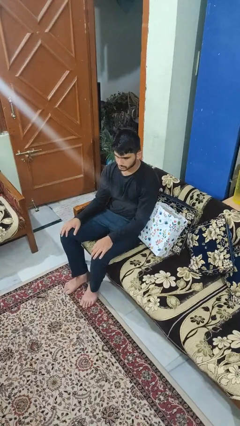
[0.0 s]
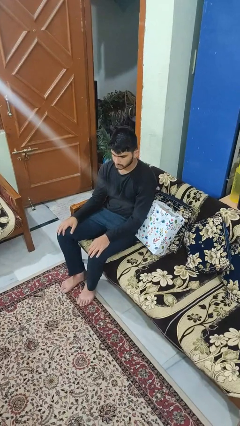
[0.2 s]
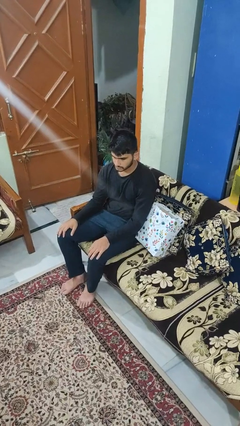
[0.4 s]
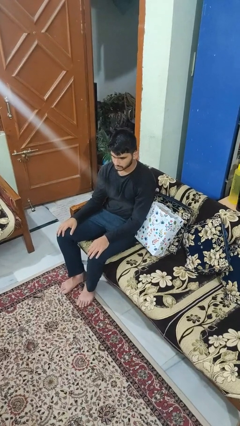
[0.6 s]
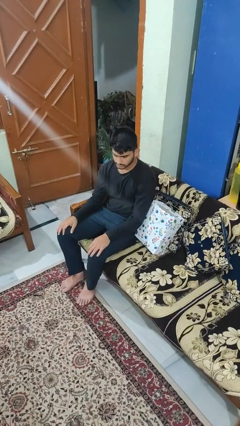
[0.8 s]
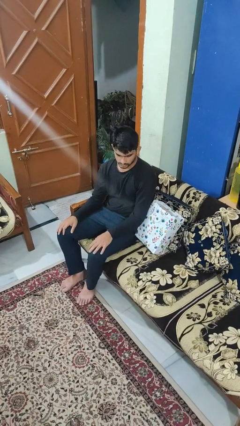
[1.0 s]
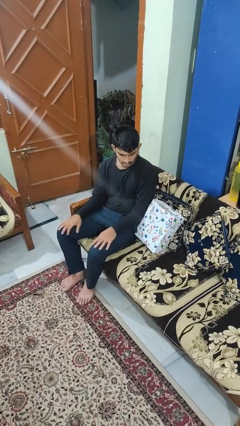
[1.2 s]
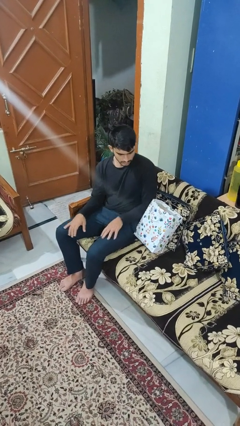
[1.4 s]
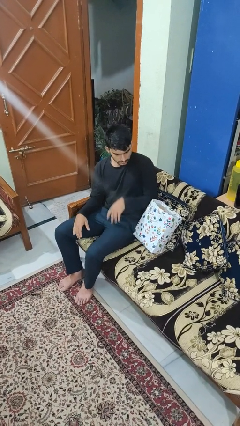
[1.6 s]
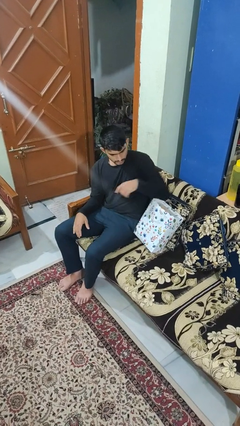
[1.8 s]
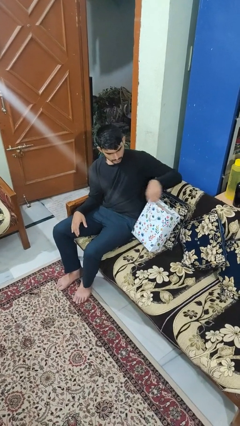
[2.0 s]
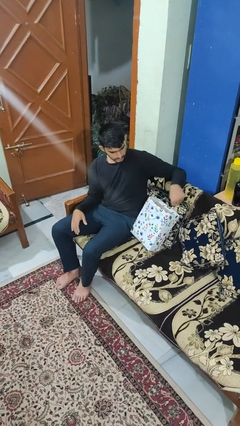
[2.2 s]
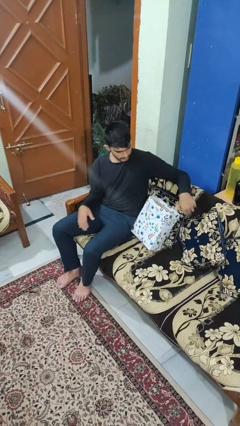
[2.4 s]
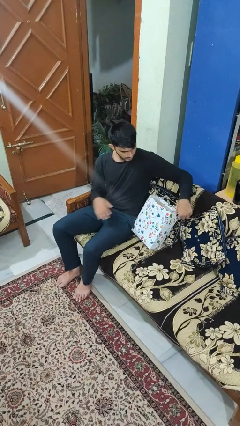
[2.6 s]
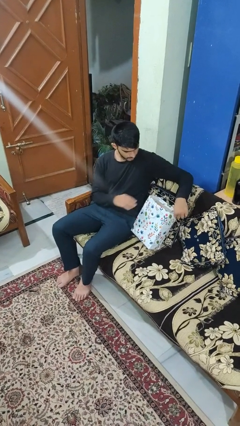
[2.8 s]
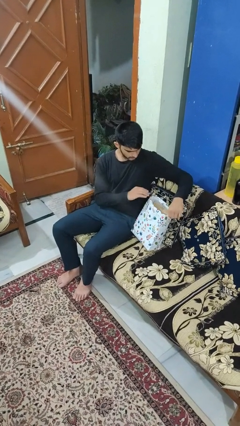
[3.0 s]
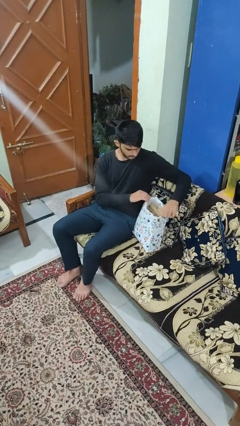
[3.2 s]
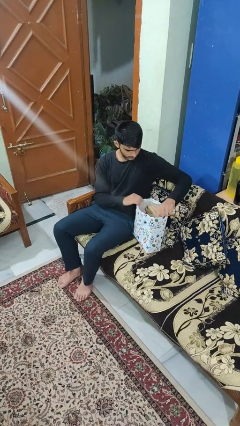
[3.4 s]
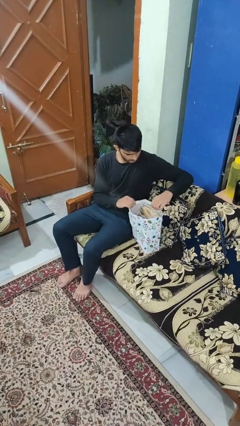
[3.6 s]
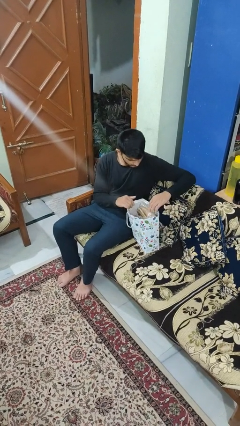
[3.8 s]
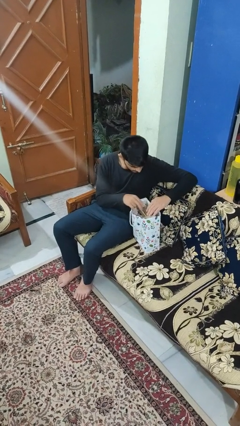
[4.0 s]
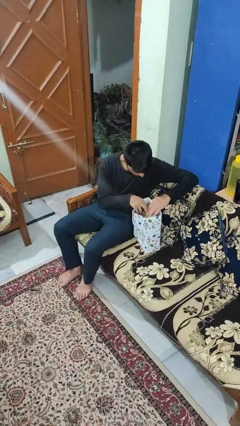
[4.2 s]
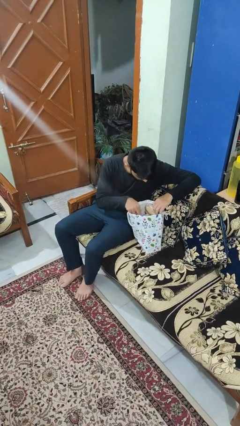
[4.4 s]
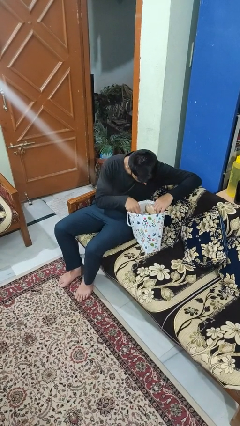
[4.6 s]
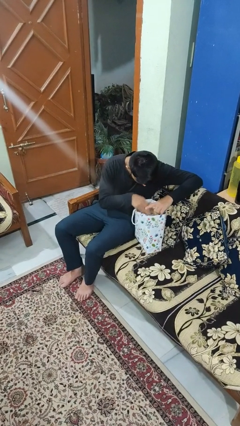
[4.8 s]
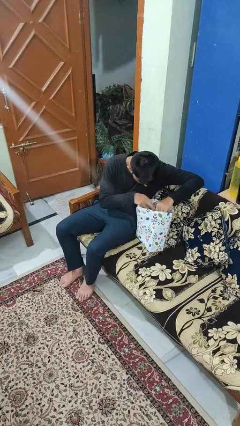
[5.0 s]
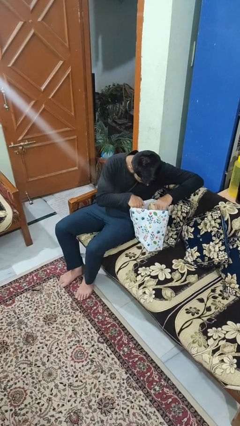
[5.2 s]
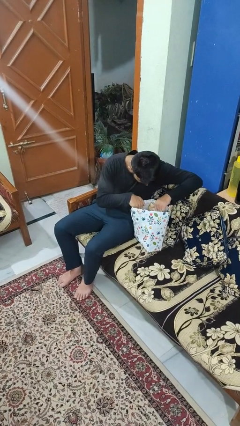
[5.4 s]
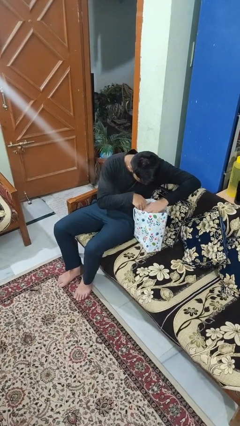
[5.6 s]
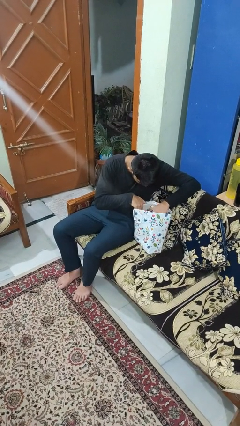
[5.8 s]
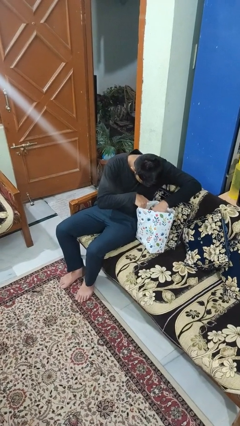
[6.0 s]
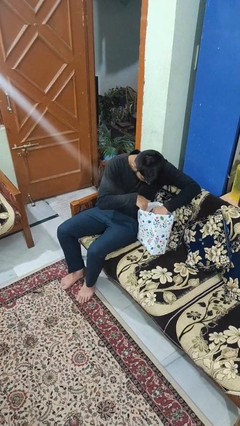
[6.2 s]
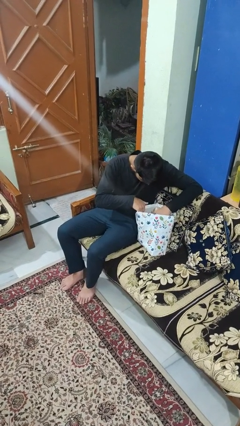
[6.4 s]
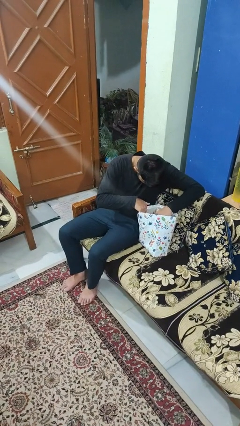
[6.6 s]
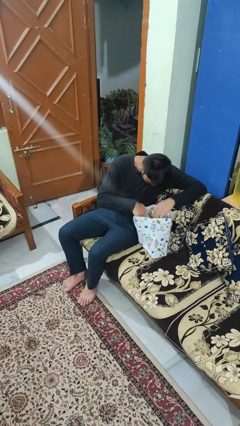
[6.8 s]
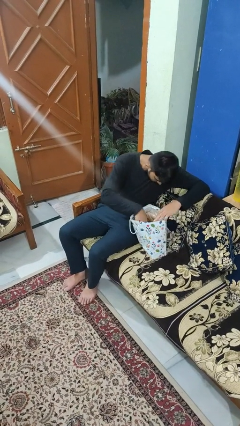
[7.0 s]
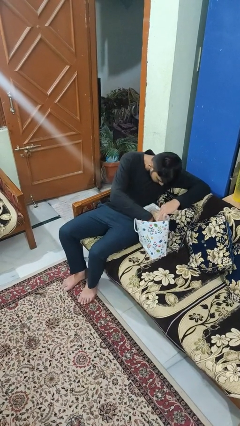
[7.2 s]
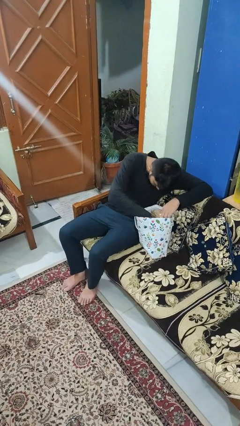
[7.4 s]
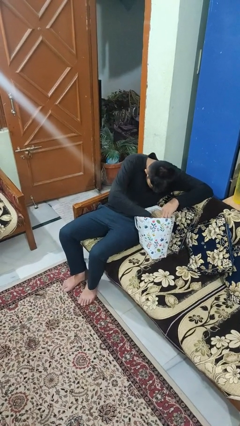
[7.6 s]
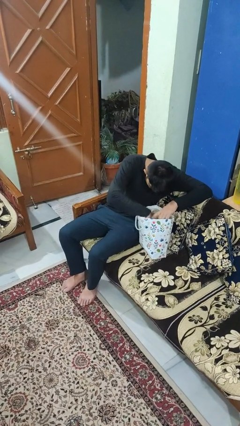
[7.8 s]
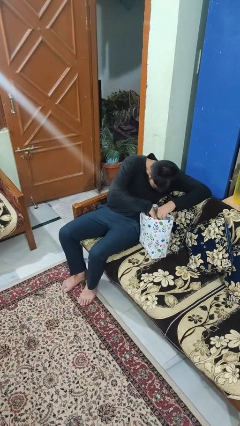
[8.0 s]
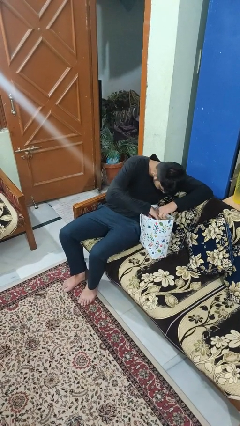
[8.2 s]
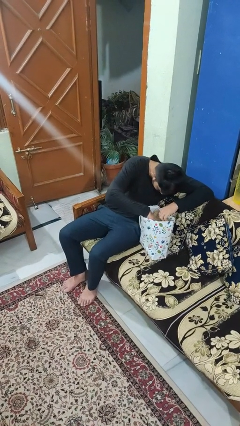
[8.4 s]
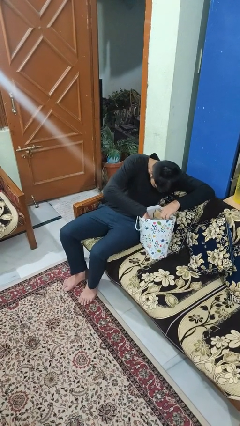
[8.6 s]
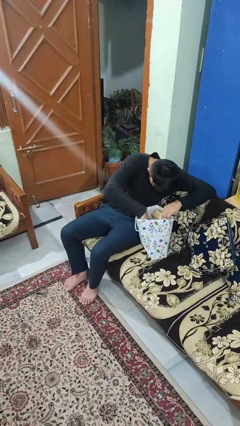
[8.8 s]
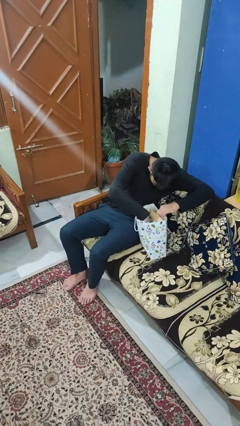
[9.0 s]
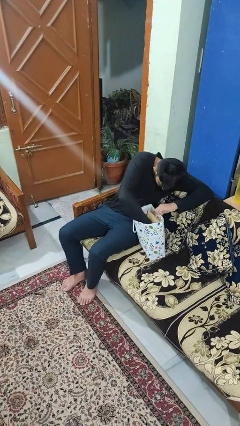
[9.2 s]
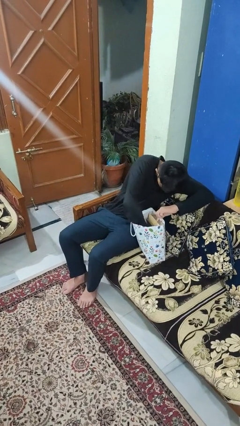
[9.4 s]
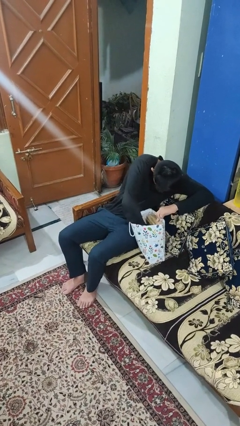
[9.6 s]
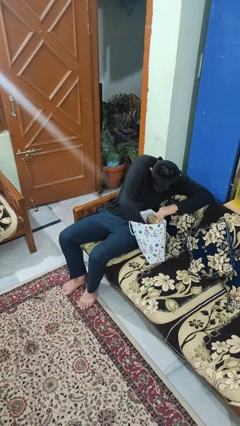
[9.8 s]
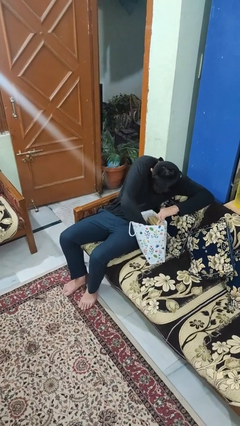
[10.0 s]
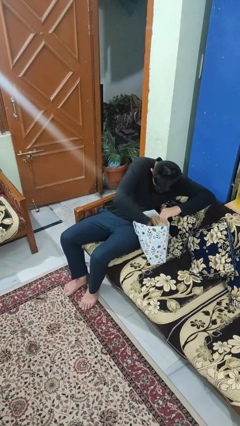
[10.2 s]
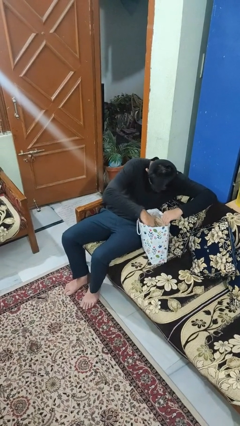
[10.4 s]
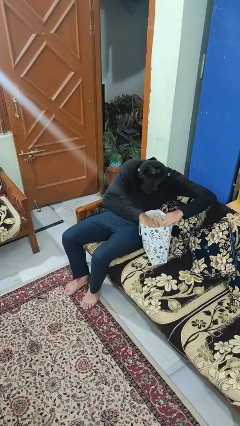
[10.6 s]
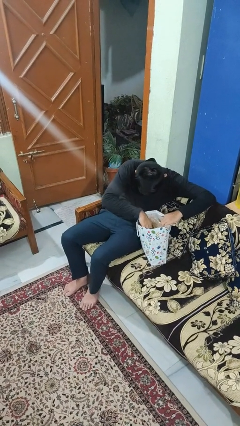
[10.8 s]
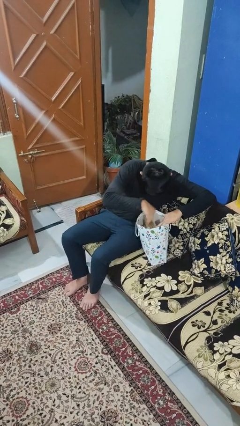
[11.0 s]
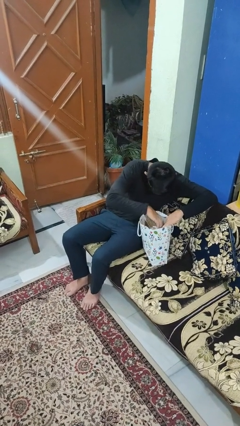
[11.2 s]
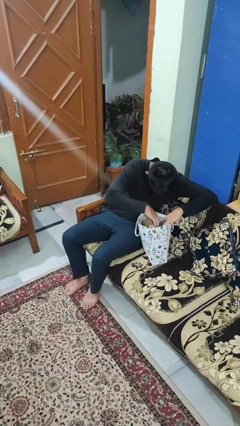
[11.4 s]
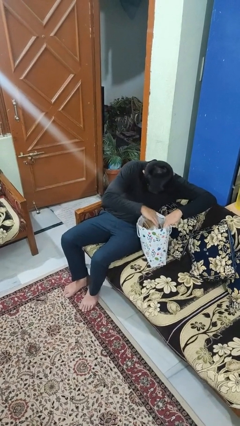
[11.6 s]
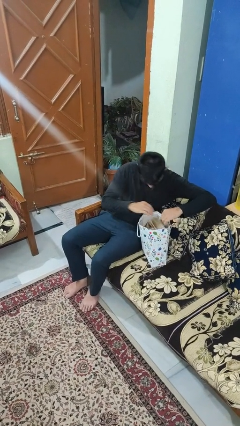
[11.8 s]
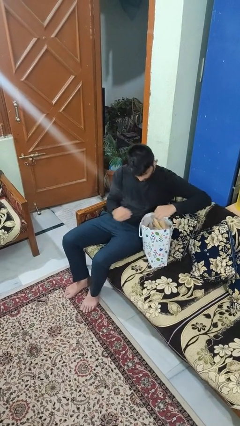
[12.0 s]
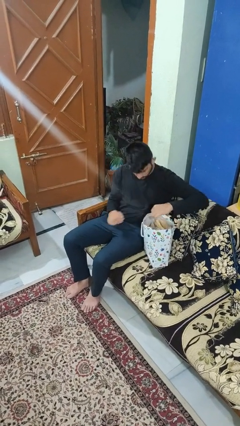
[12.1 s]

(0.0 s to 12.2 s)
person searches in bag

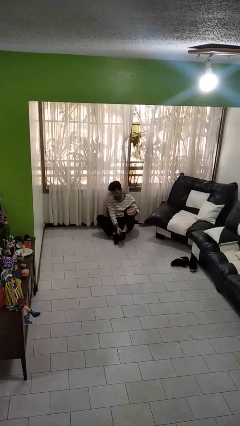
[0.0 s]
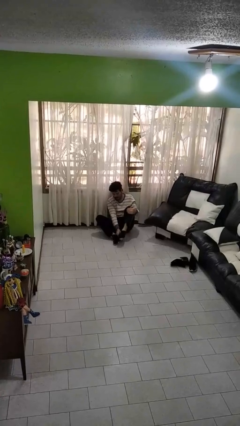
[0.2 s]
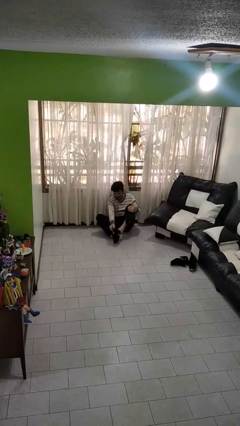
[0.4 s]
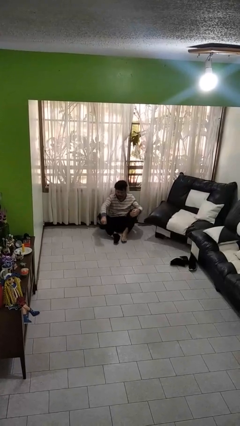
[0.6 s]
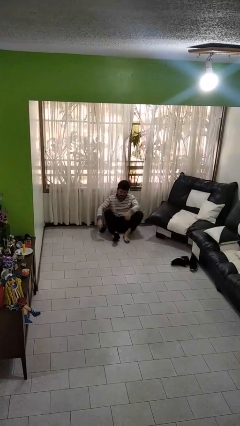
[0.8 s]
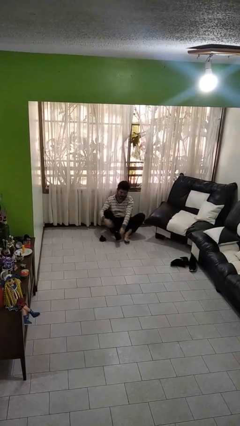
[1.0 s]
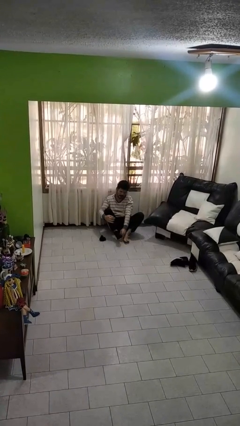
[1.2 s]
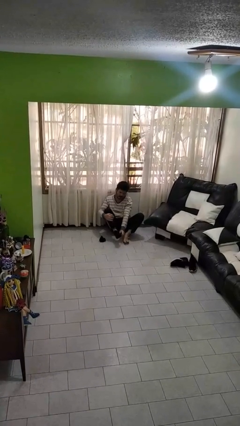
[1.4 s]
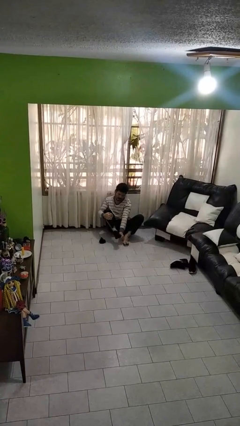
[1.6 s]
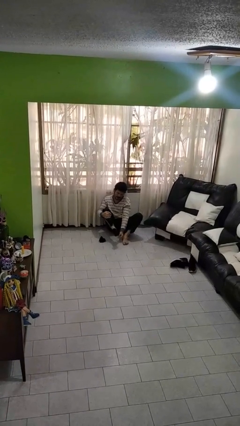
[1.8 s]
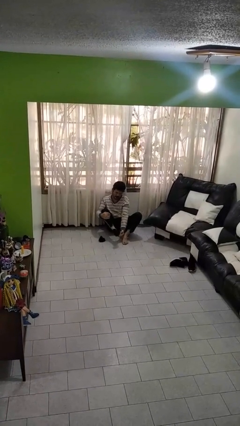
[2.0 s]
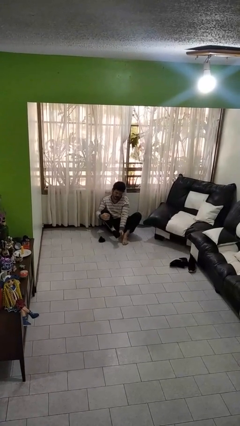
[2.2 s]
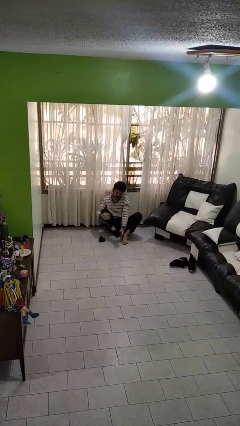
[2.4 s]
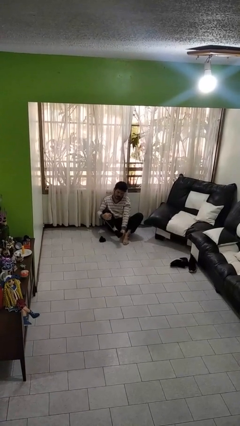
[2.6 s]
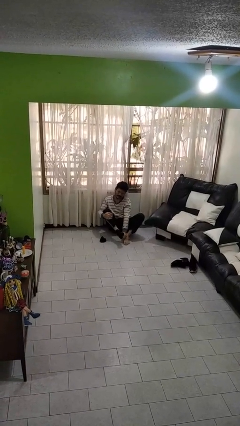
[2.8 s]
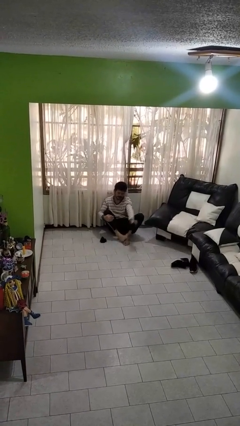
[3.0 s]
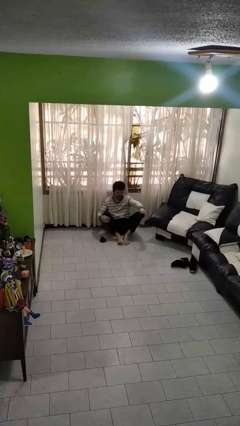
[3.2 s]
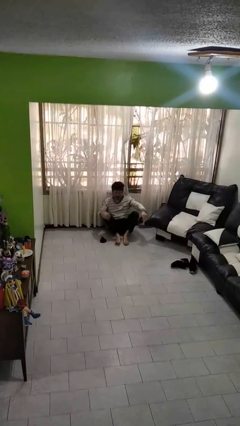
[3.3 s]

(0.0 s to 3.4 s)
person takes off socks

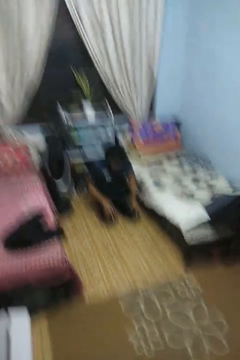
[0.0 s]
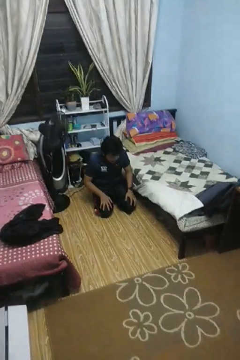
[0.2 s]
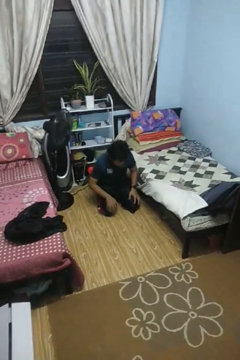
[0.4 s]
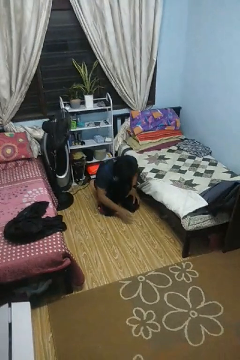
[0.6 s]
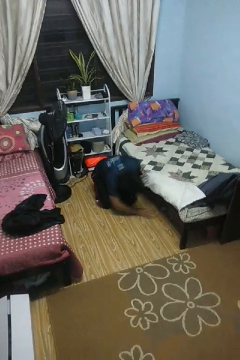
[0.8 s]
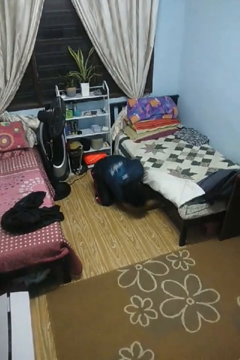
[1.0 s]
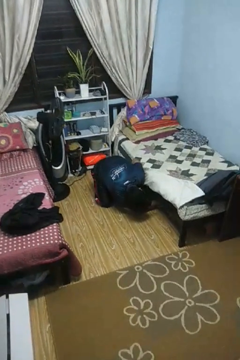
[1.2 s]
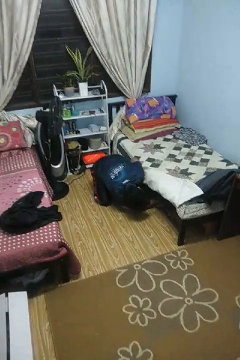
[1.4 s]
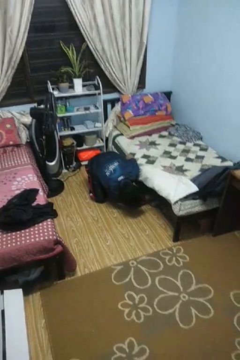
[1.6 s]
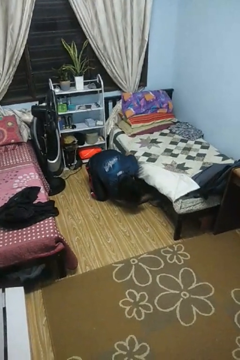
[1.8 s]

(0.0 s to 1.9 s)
person searches under bed

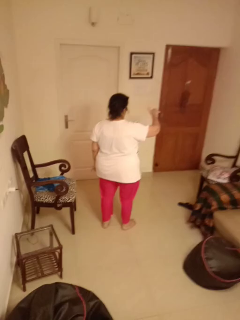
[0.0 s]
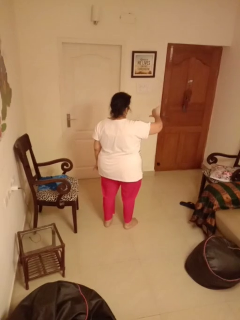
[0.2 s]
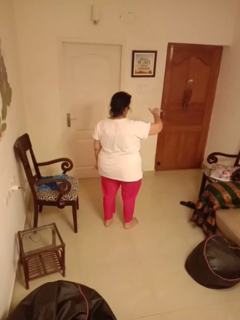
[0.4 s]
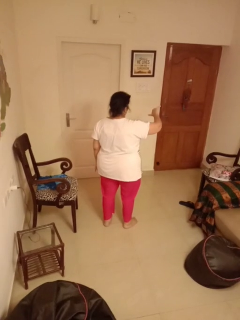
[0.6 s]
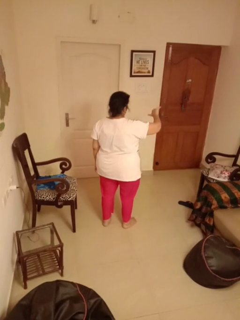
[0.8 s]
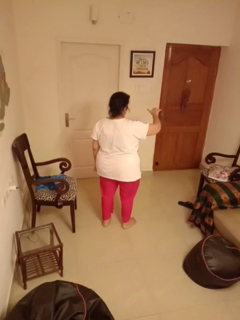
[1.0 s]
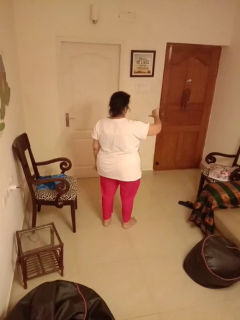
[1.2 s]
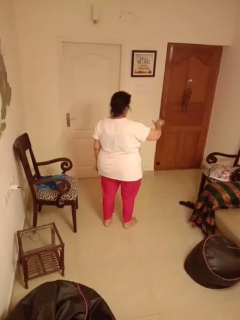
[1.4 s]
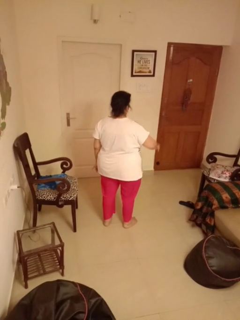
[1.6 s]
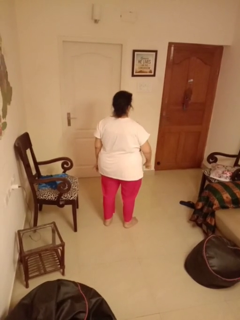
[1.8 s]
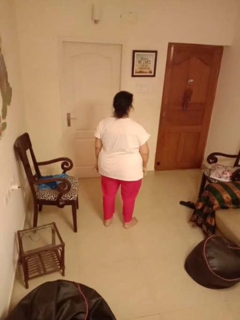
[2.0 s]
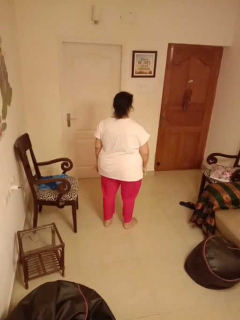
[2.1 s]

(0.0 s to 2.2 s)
person gestures hang loose
